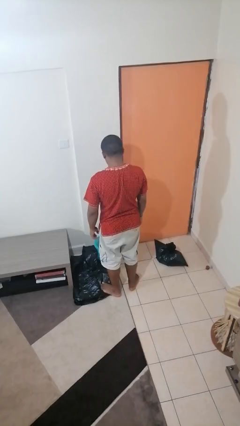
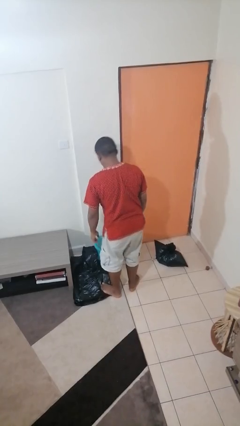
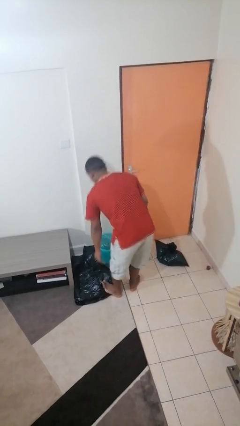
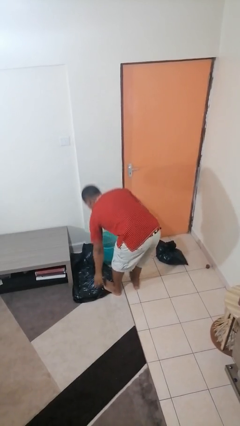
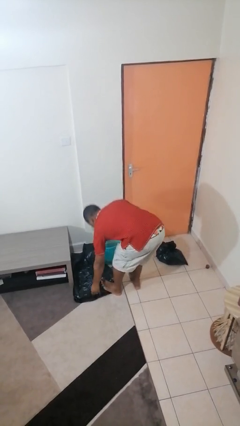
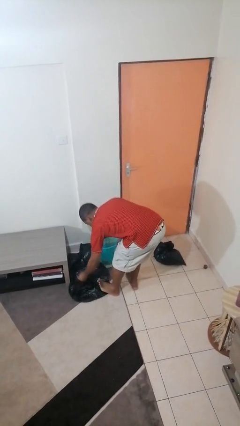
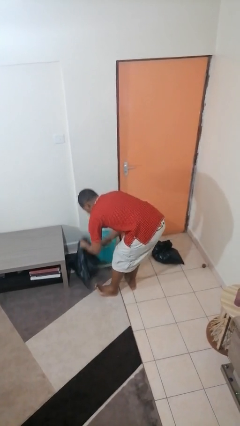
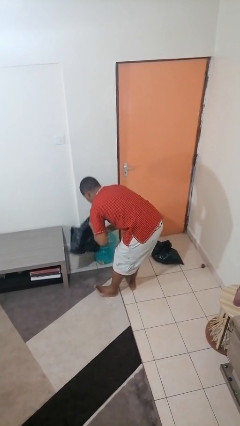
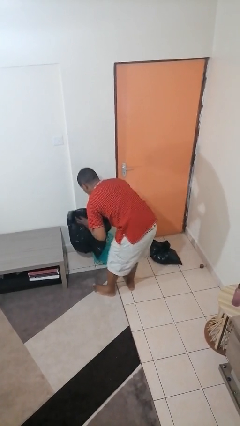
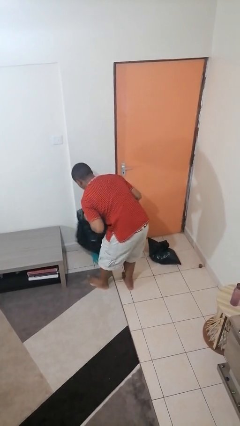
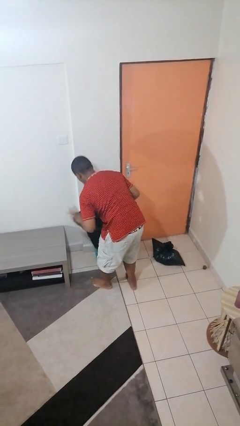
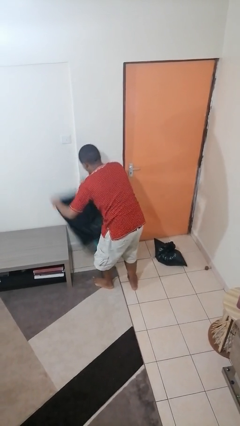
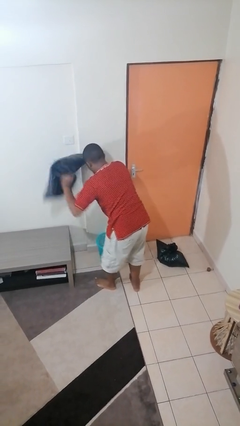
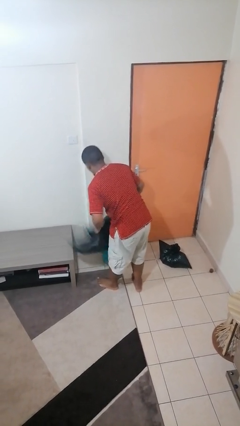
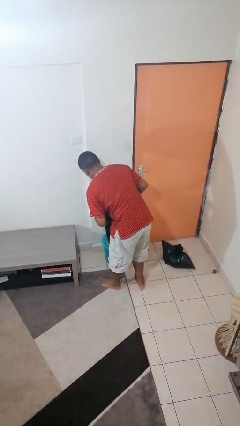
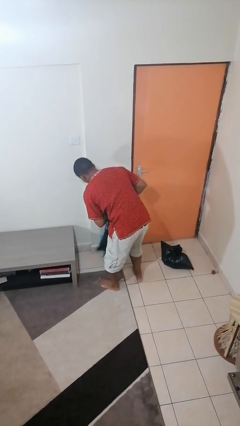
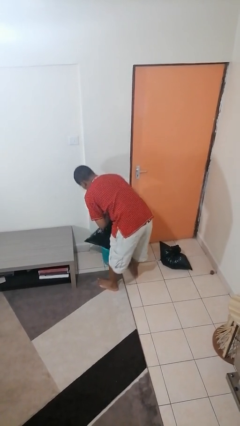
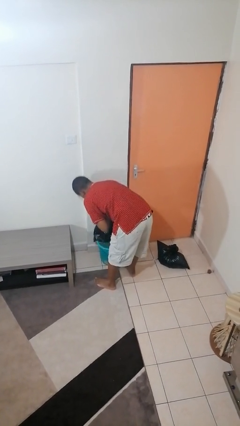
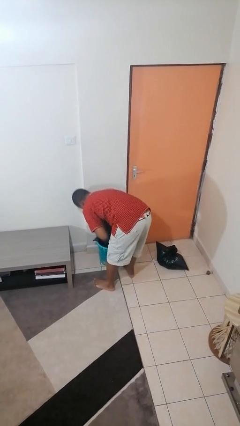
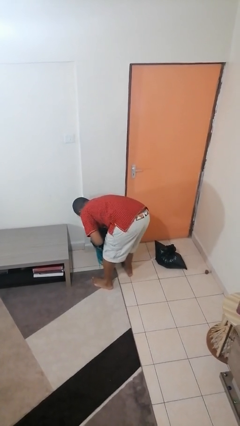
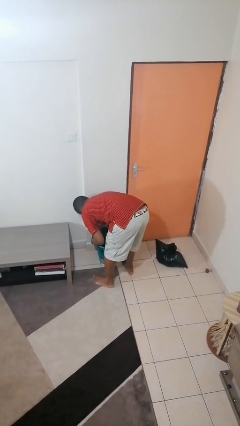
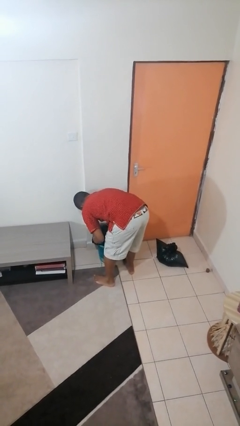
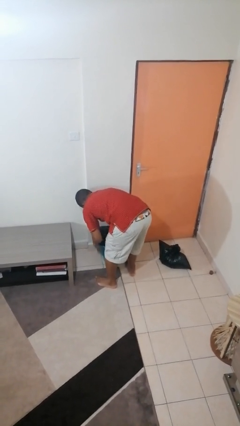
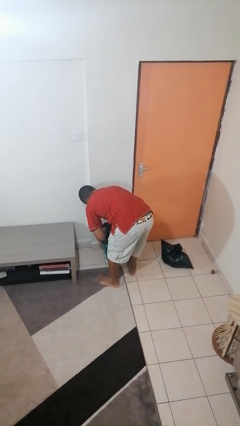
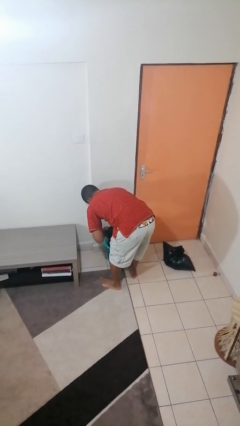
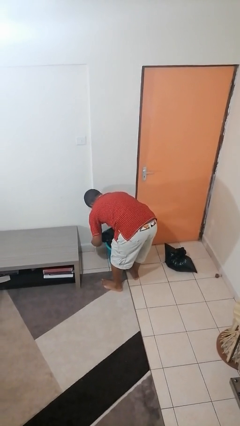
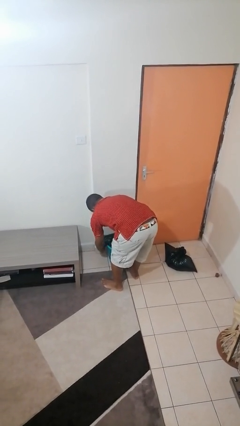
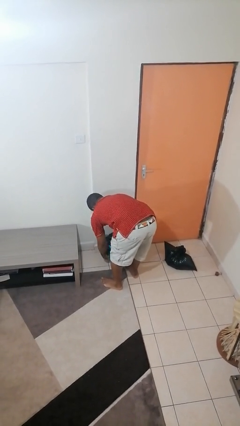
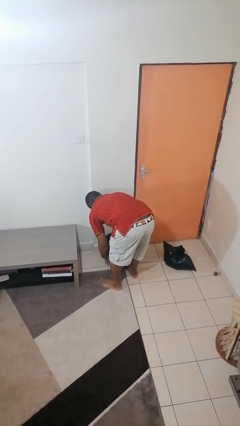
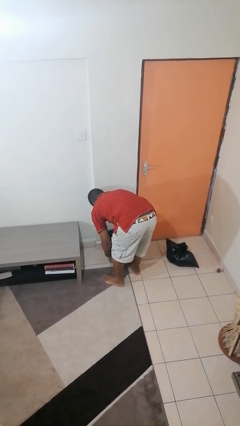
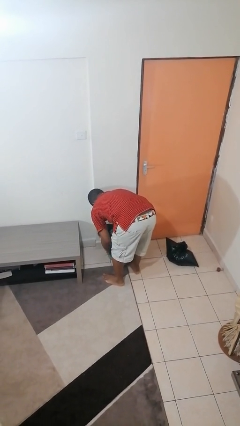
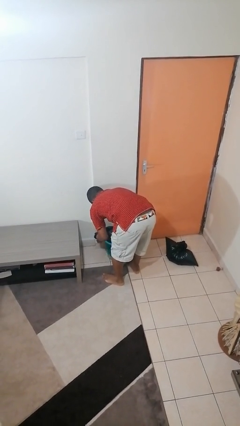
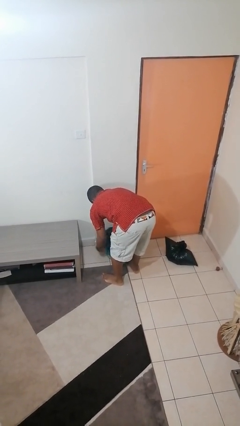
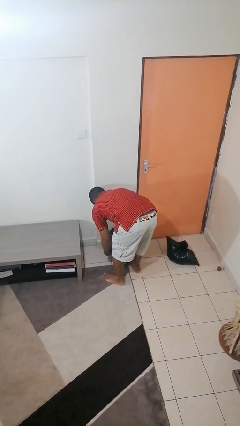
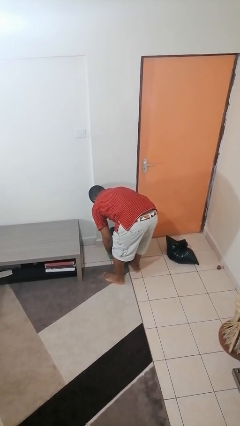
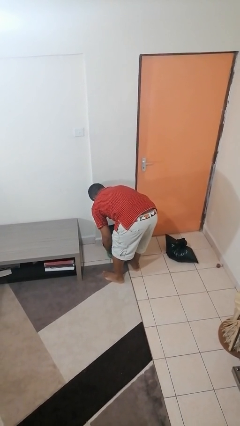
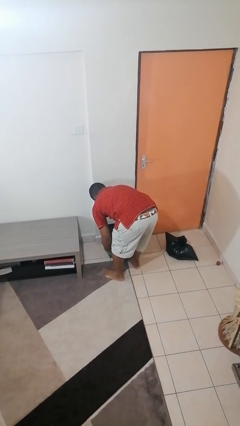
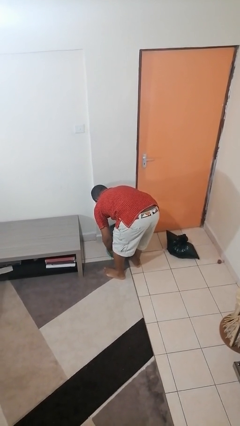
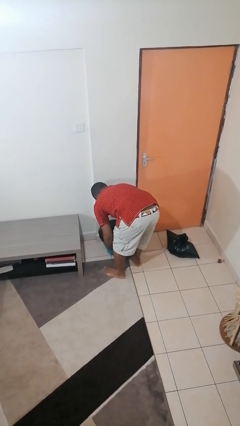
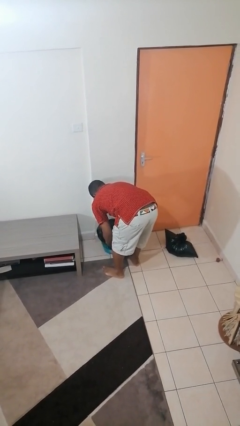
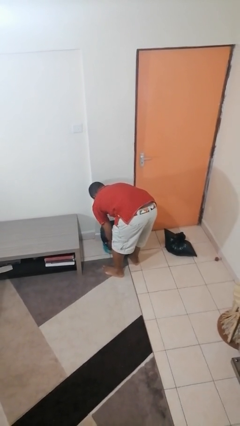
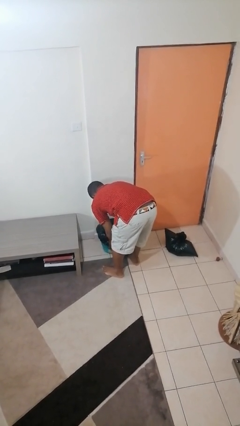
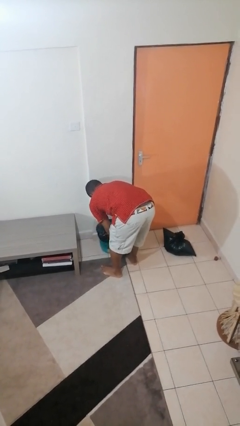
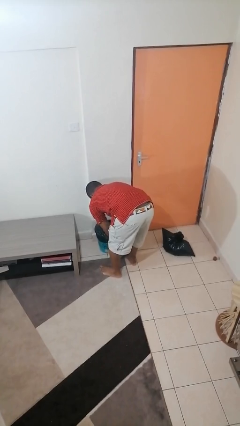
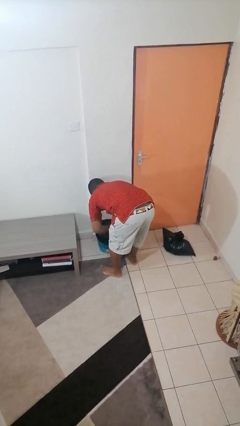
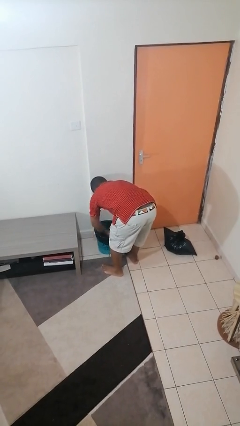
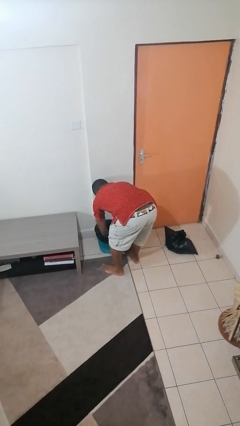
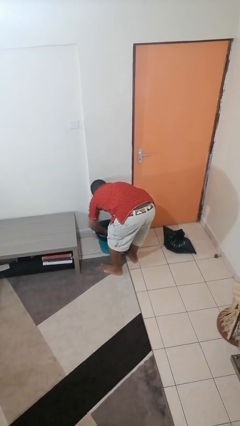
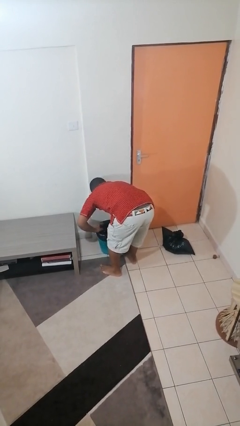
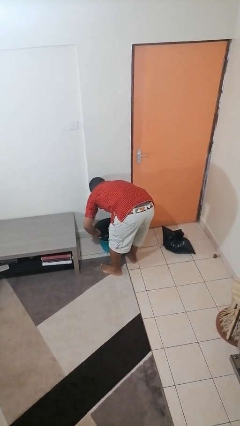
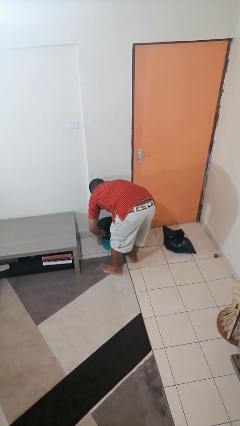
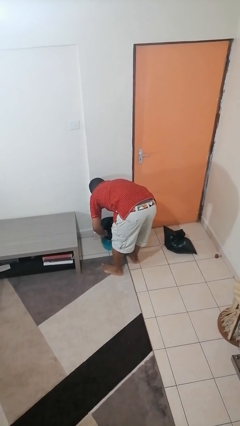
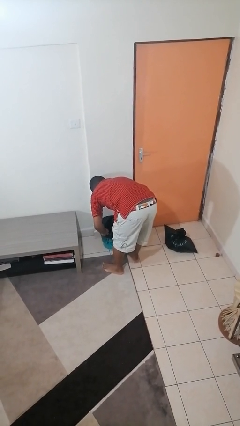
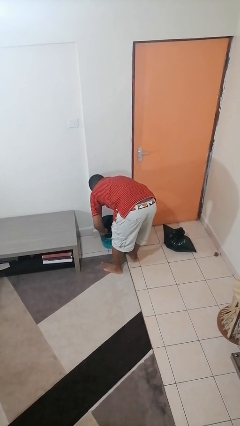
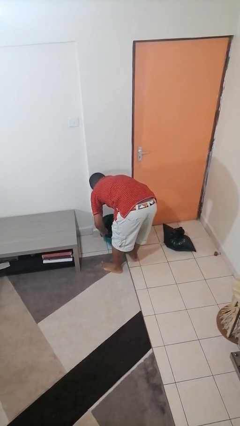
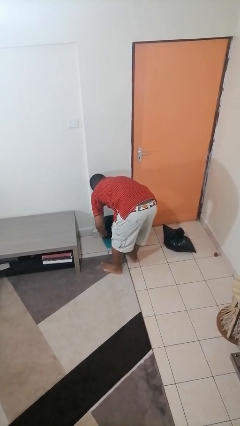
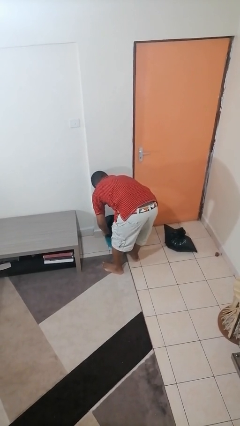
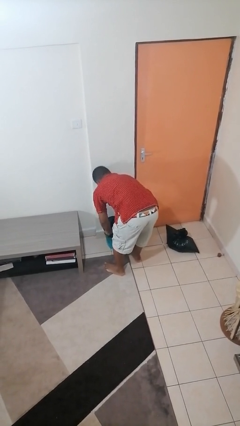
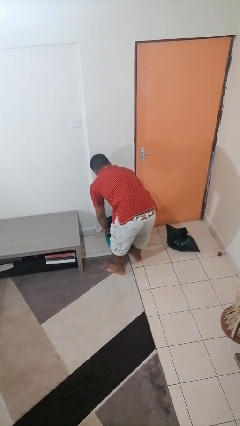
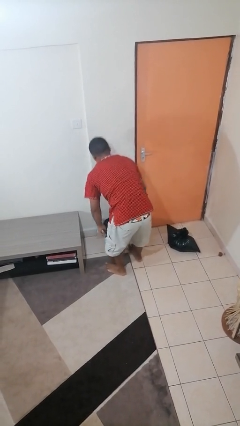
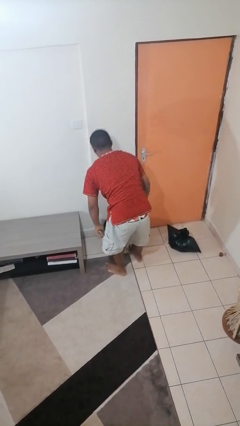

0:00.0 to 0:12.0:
person inserts trashbag into trashcan

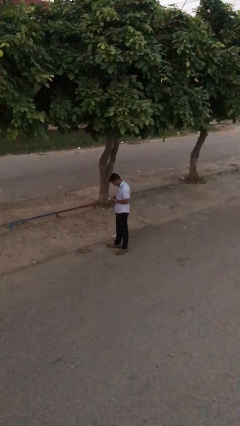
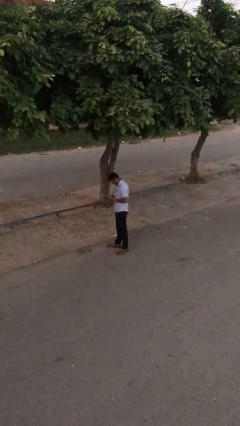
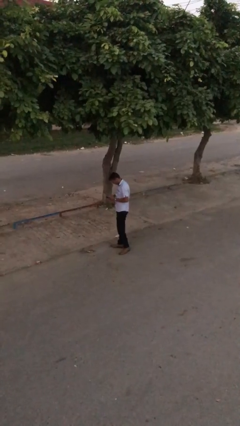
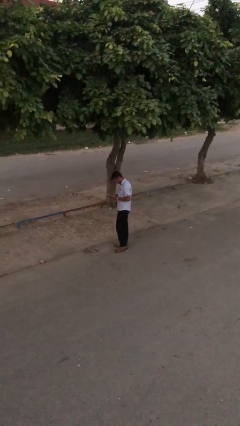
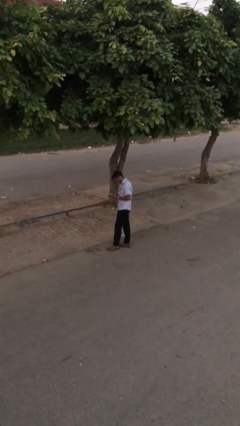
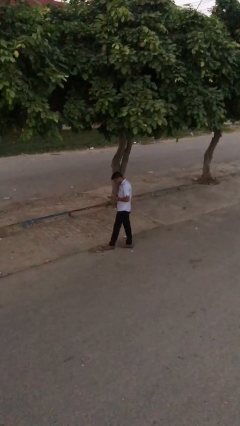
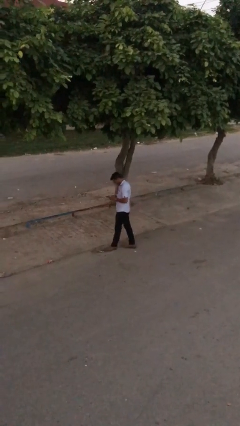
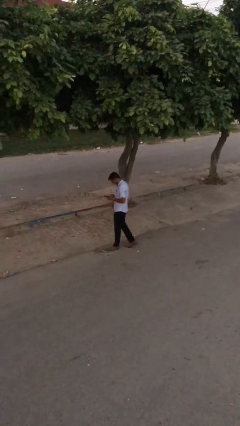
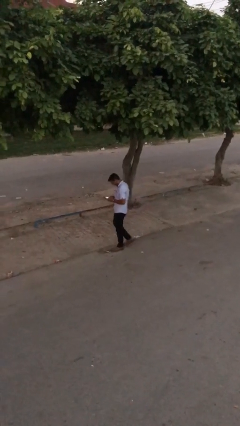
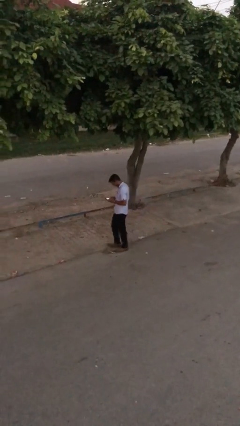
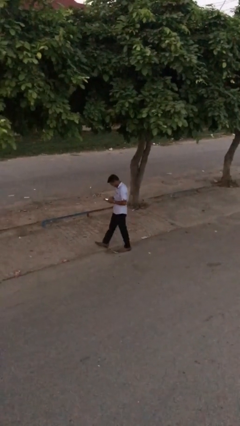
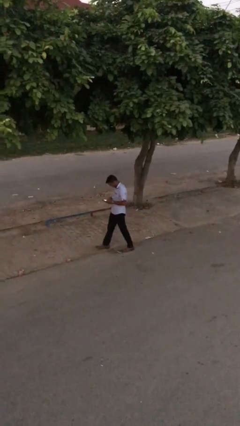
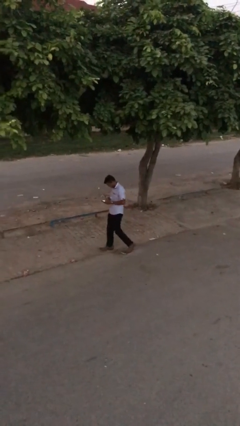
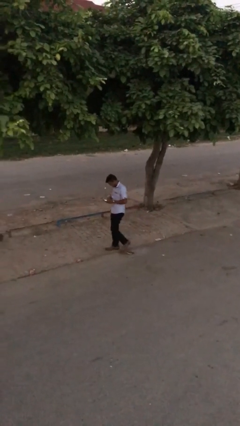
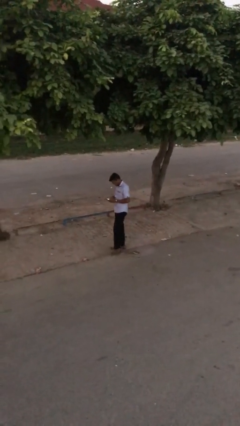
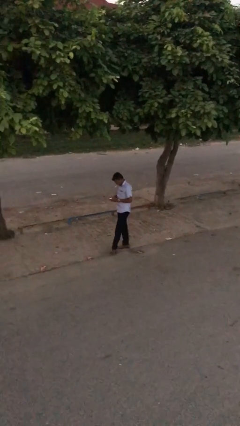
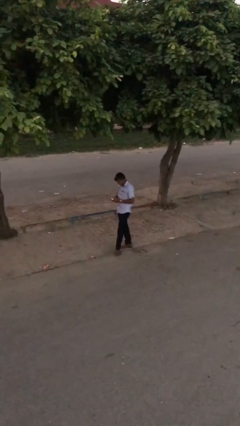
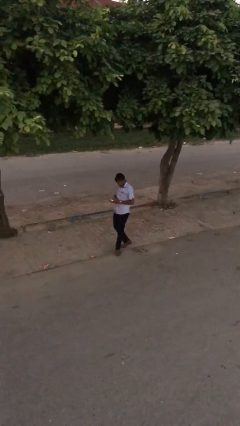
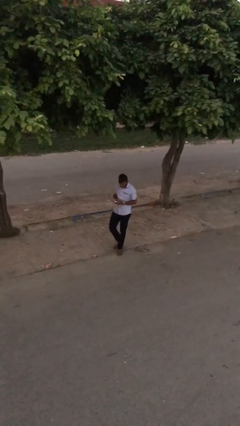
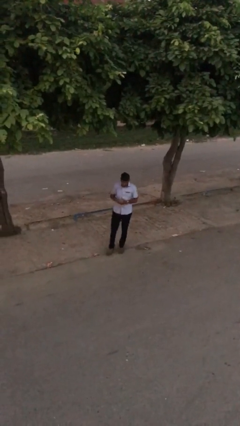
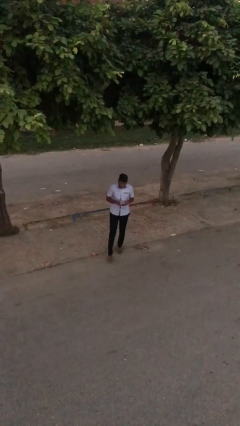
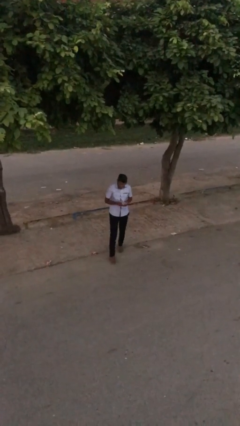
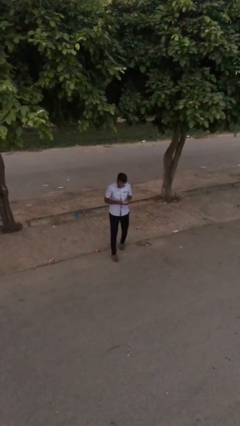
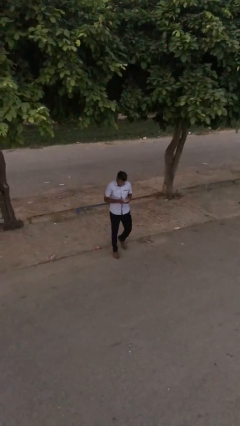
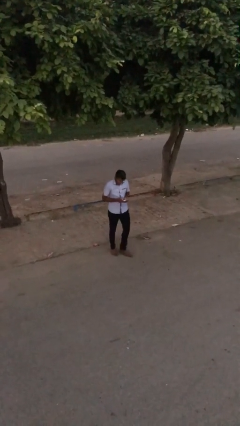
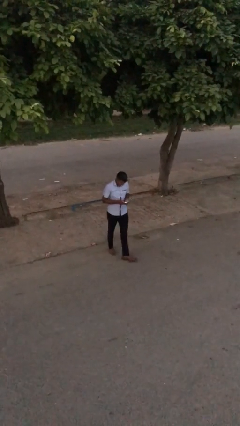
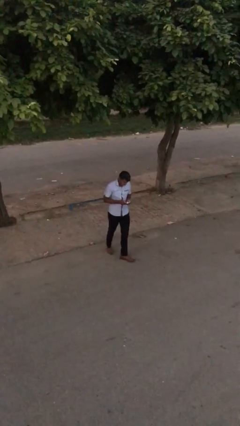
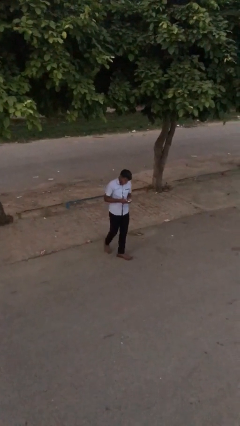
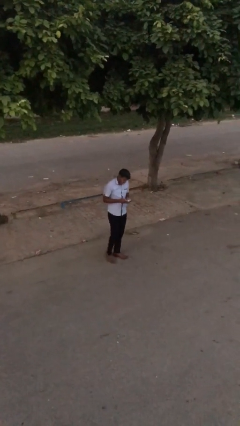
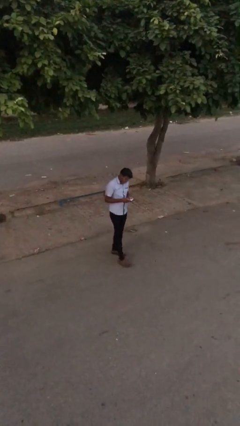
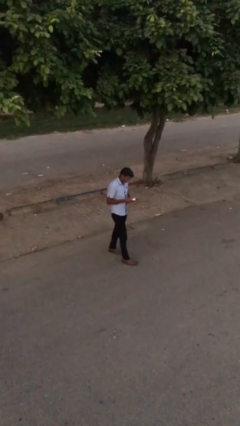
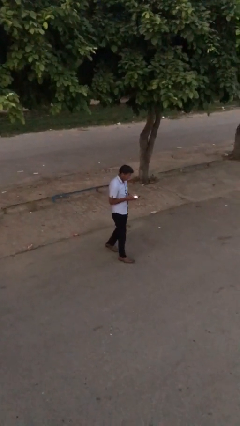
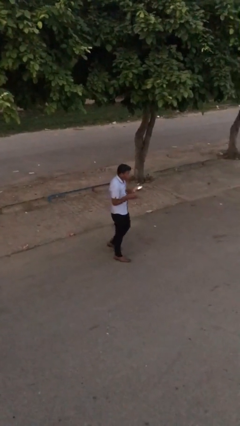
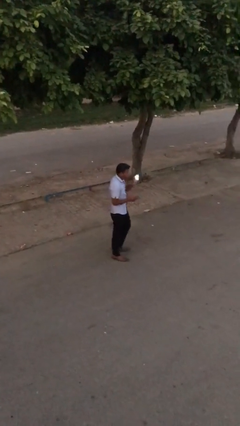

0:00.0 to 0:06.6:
person texts on phone
